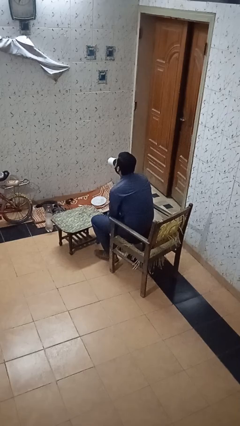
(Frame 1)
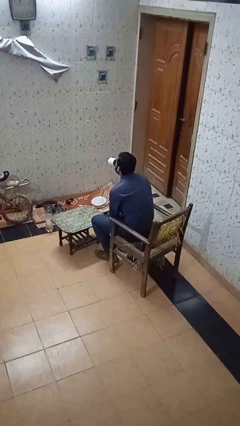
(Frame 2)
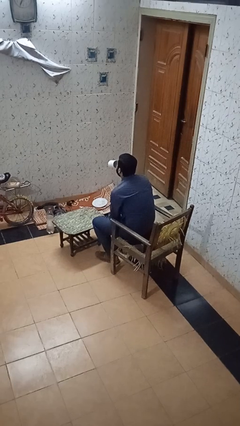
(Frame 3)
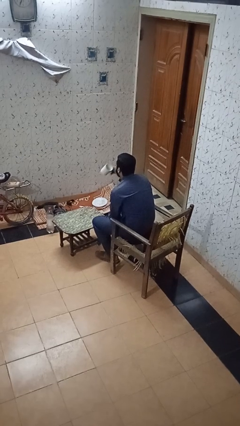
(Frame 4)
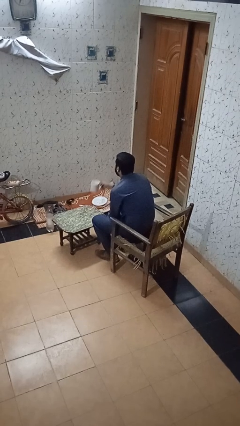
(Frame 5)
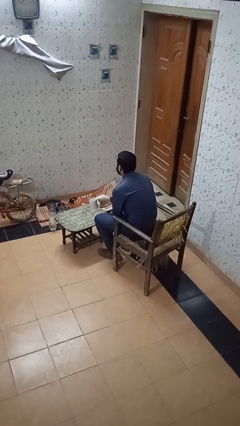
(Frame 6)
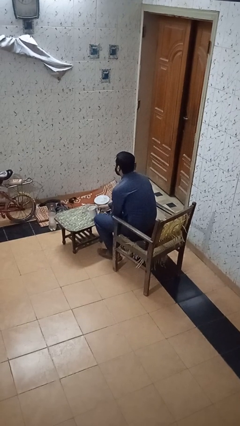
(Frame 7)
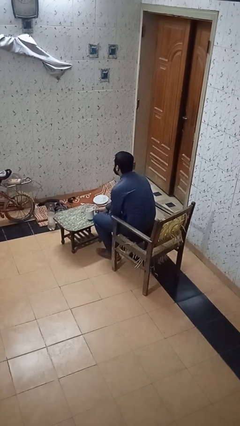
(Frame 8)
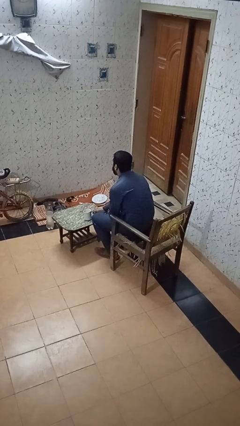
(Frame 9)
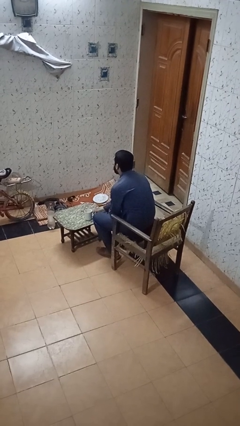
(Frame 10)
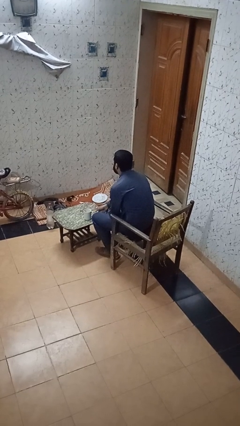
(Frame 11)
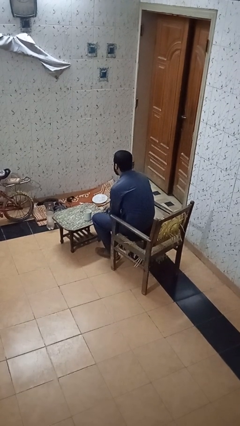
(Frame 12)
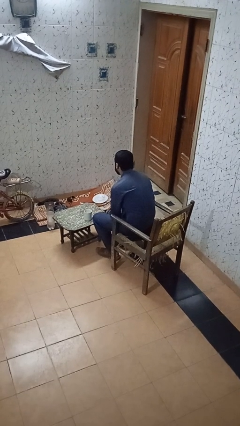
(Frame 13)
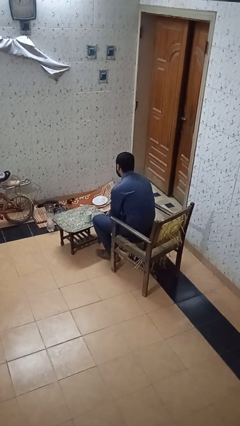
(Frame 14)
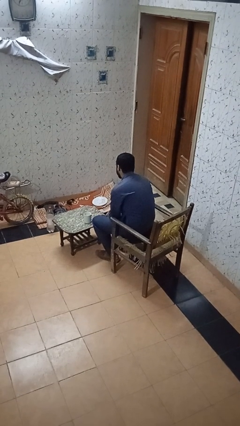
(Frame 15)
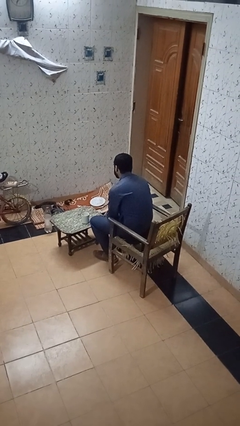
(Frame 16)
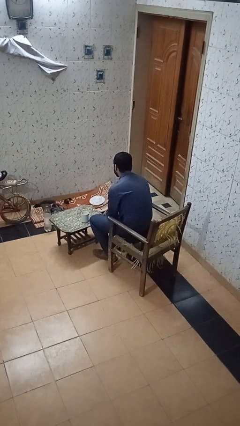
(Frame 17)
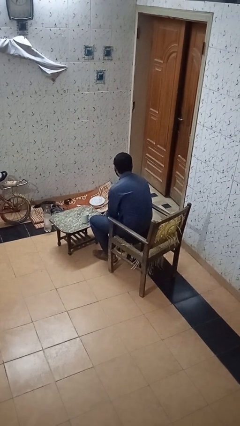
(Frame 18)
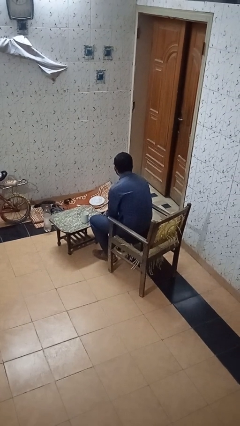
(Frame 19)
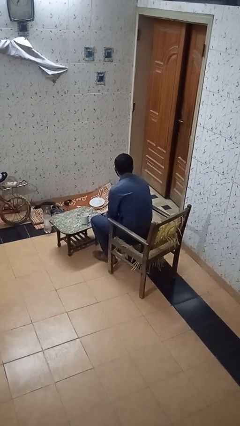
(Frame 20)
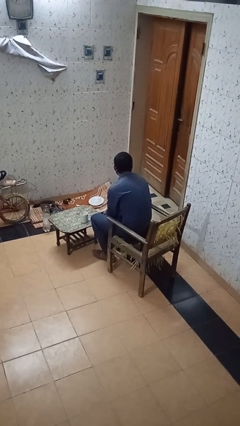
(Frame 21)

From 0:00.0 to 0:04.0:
person puts down object on table

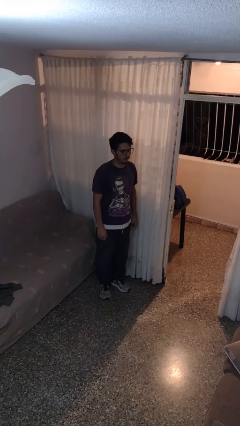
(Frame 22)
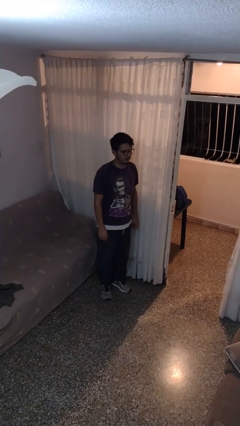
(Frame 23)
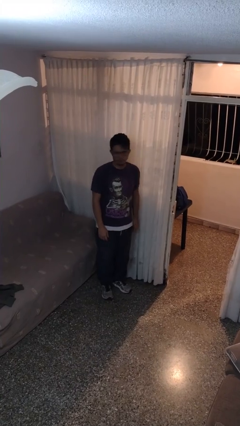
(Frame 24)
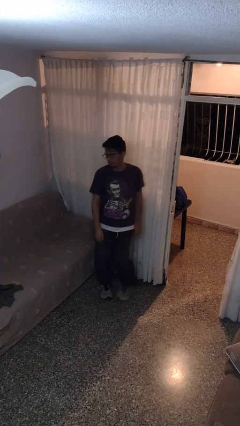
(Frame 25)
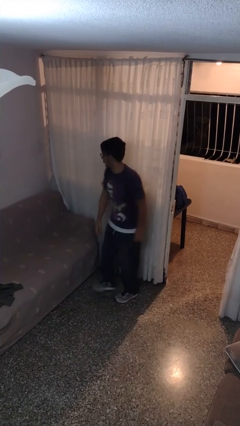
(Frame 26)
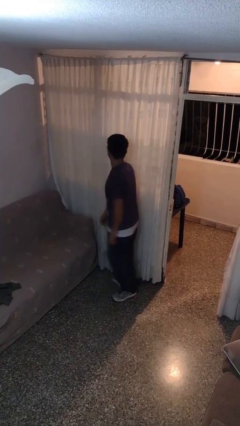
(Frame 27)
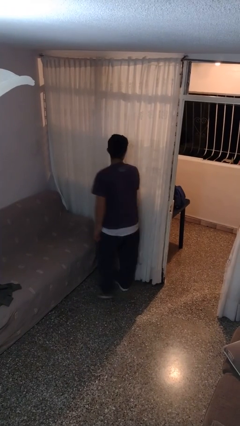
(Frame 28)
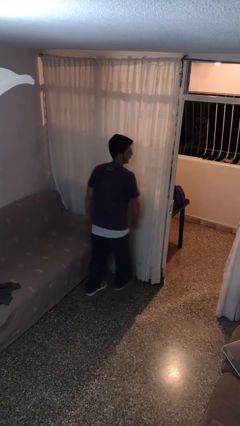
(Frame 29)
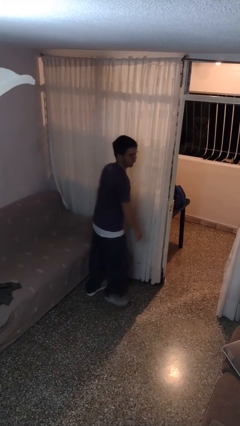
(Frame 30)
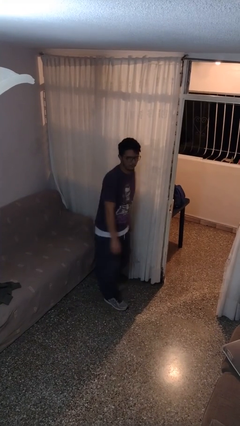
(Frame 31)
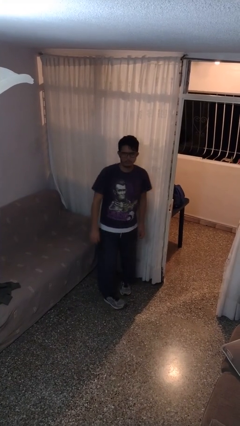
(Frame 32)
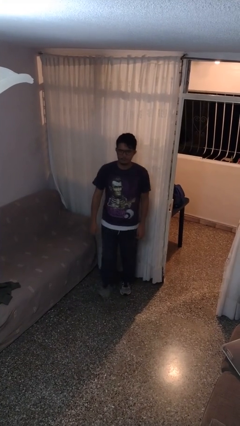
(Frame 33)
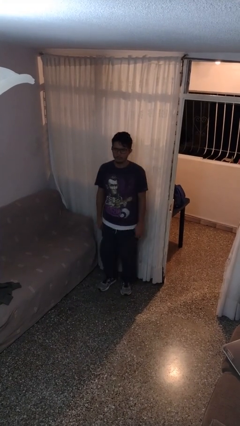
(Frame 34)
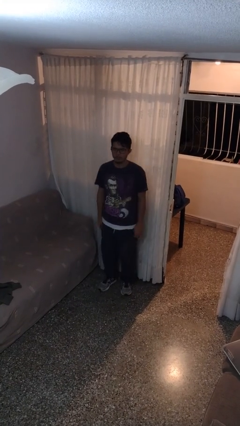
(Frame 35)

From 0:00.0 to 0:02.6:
person twirls

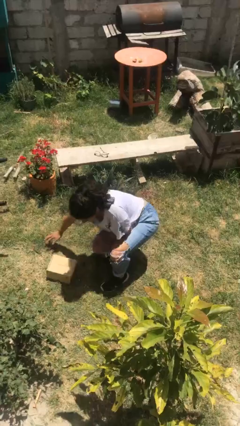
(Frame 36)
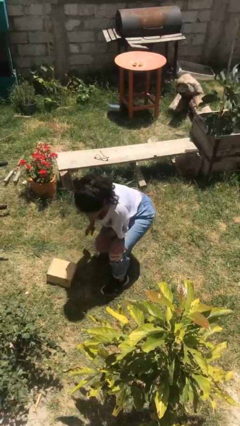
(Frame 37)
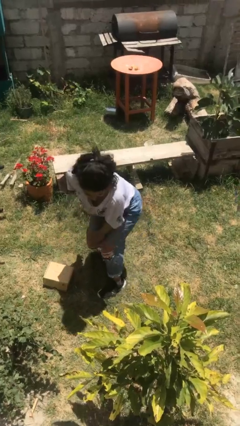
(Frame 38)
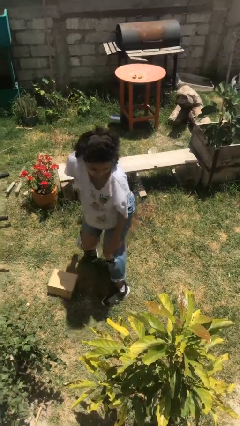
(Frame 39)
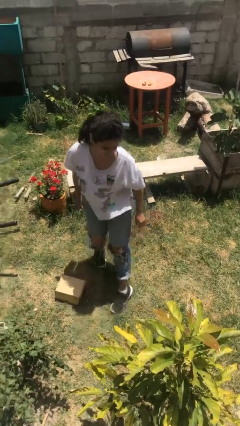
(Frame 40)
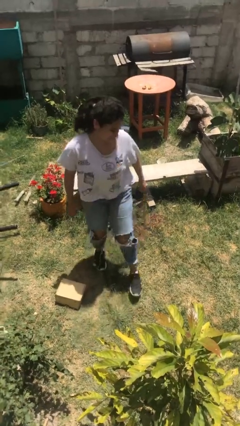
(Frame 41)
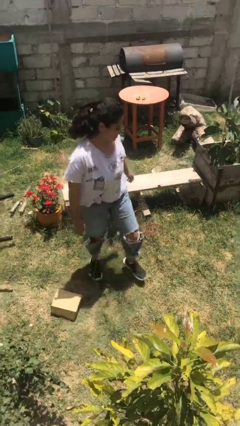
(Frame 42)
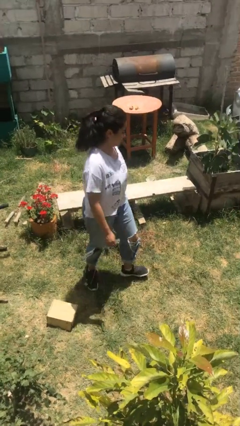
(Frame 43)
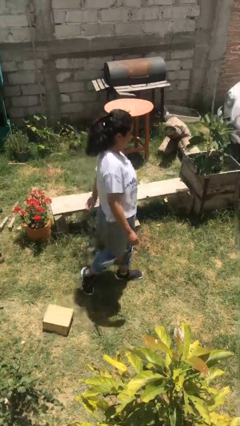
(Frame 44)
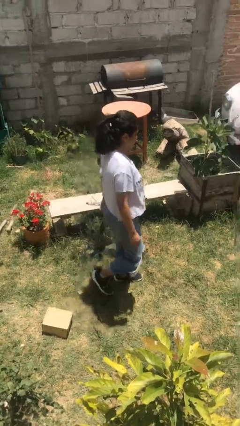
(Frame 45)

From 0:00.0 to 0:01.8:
person stands up from floor

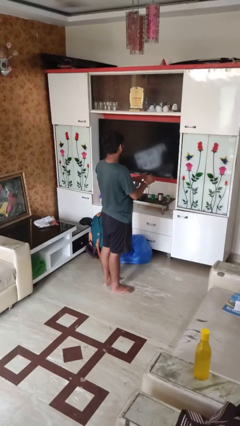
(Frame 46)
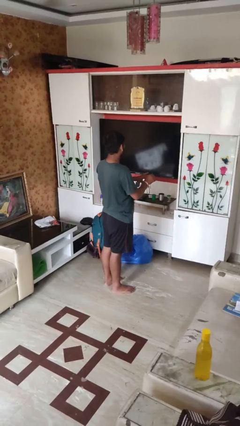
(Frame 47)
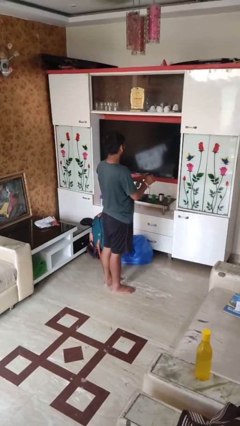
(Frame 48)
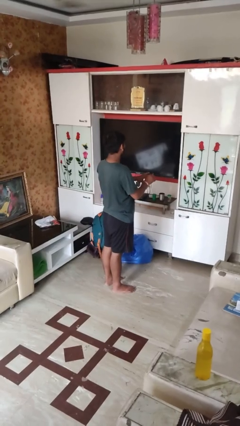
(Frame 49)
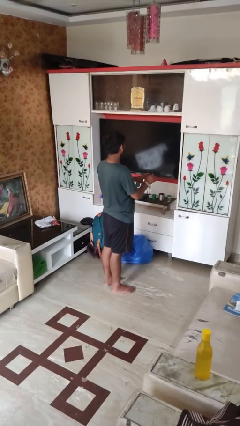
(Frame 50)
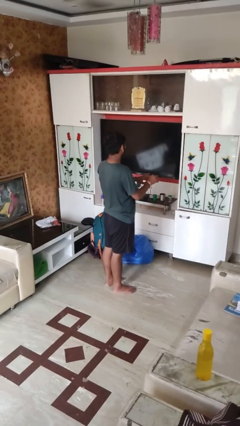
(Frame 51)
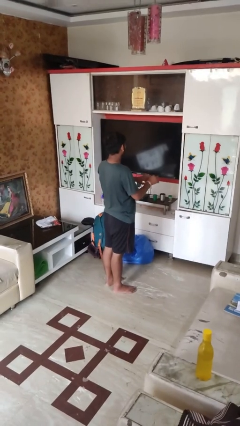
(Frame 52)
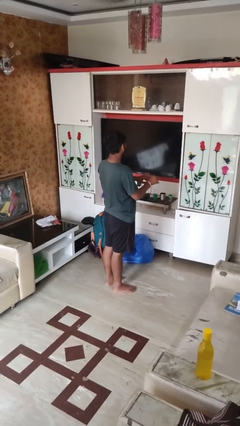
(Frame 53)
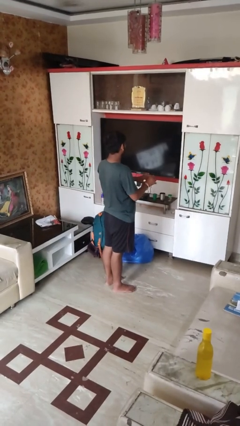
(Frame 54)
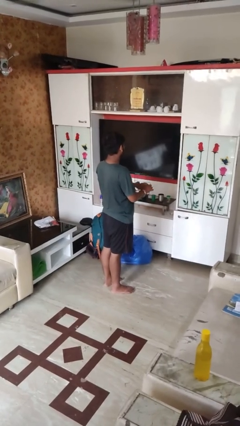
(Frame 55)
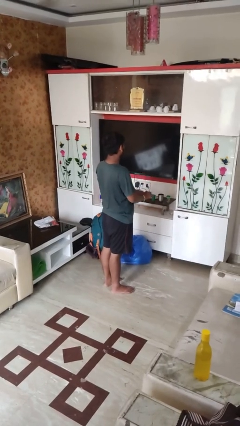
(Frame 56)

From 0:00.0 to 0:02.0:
person files fingernails

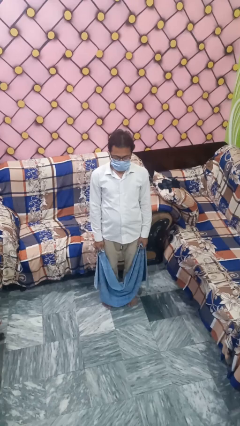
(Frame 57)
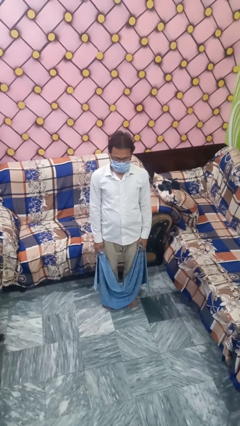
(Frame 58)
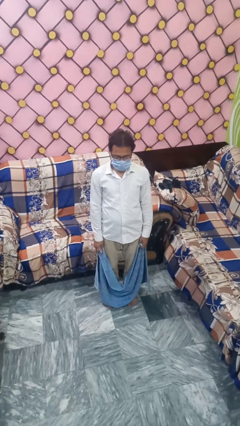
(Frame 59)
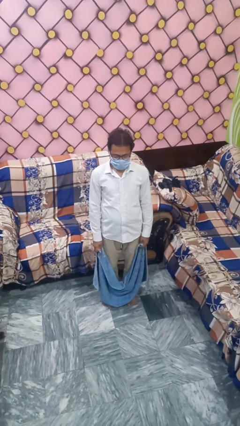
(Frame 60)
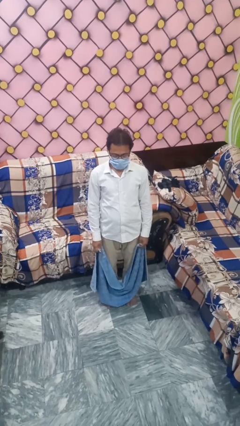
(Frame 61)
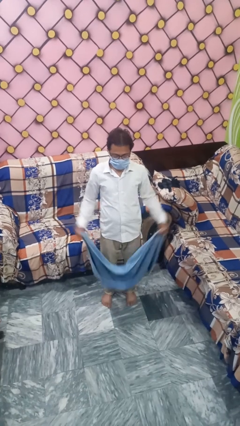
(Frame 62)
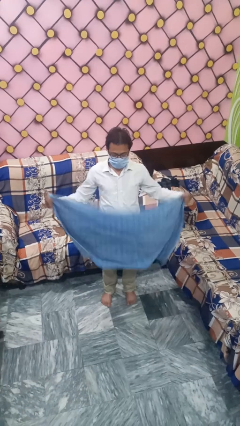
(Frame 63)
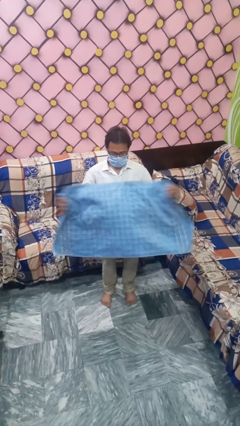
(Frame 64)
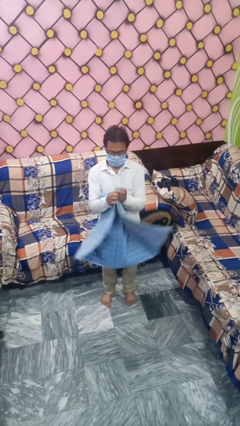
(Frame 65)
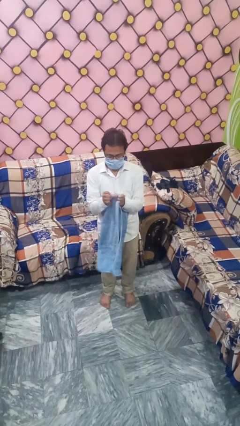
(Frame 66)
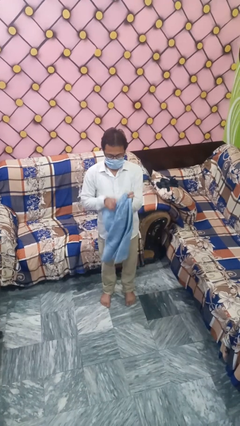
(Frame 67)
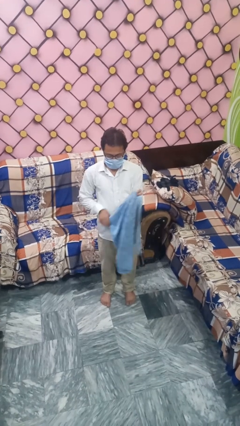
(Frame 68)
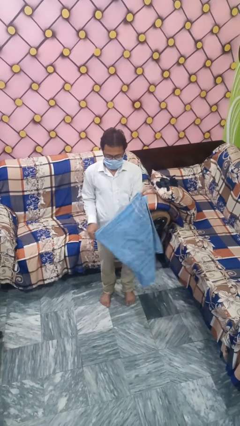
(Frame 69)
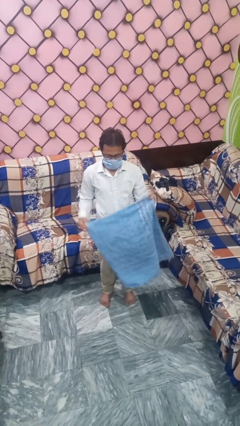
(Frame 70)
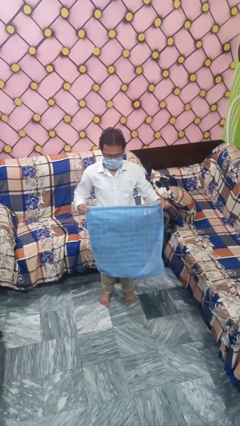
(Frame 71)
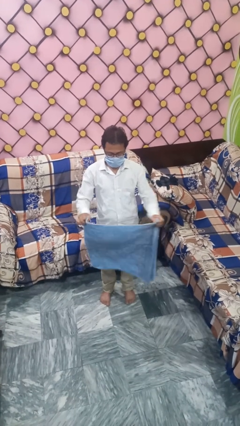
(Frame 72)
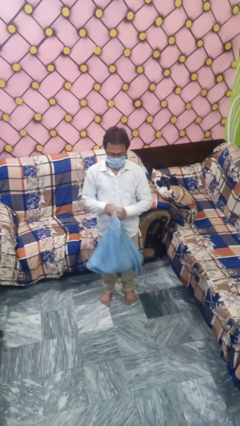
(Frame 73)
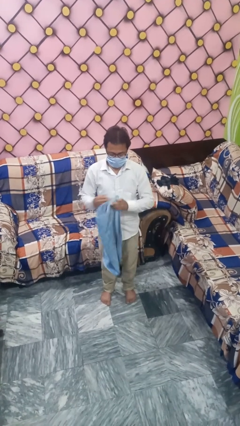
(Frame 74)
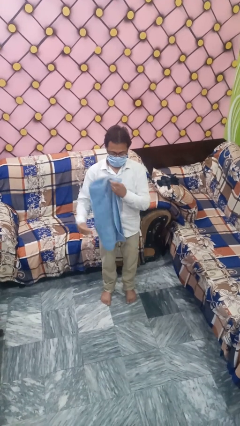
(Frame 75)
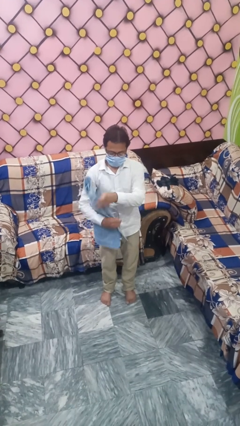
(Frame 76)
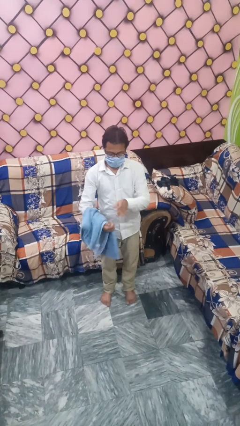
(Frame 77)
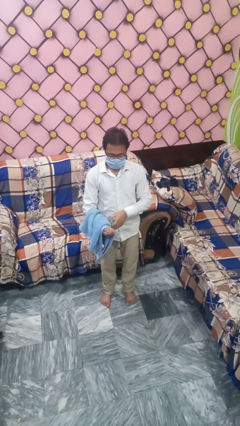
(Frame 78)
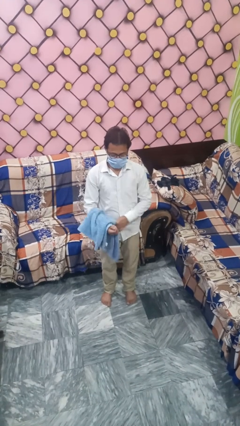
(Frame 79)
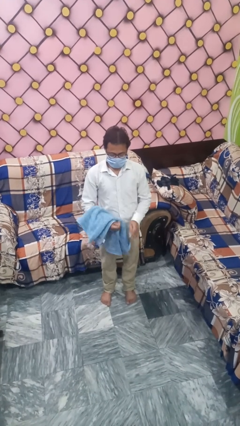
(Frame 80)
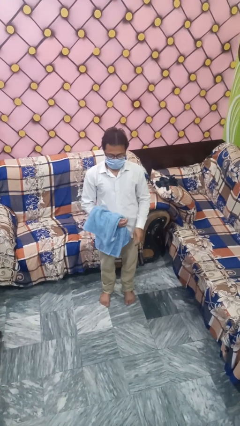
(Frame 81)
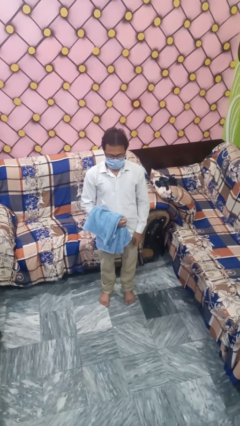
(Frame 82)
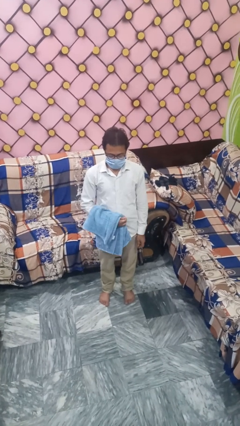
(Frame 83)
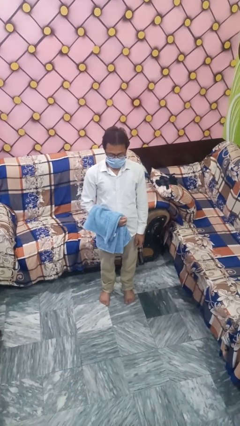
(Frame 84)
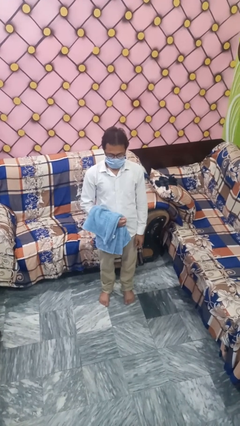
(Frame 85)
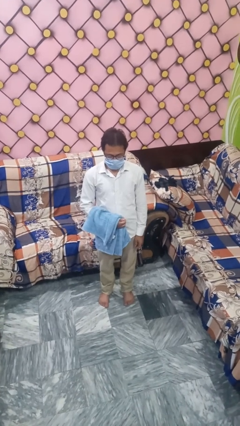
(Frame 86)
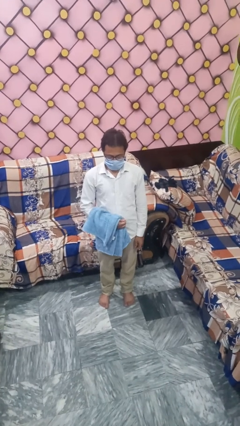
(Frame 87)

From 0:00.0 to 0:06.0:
person folds towel

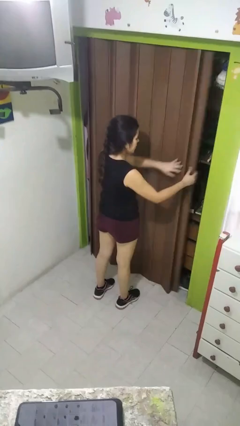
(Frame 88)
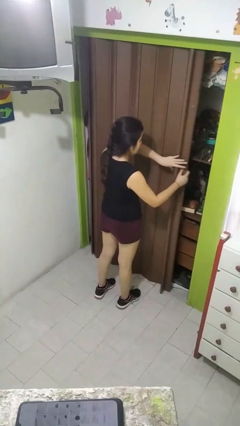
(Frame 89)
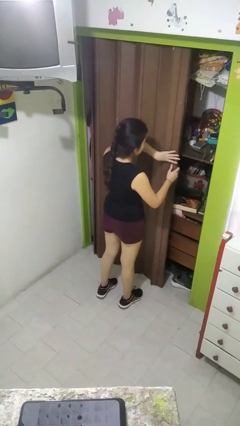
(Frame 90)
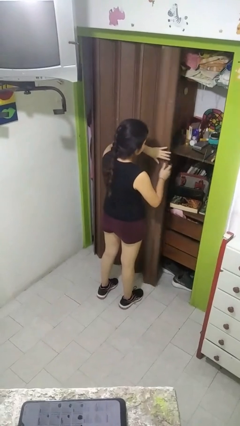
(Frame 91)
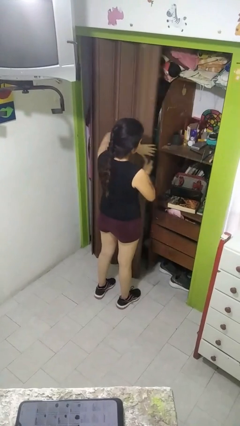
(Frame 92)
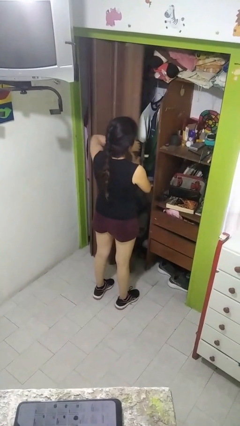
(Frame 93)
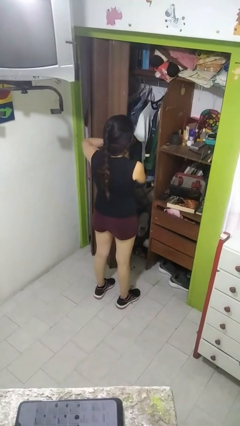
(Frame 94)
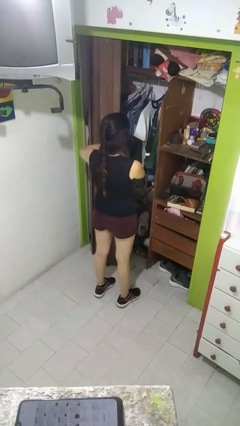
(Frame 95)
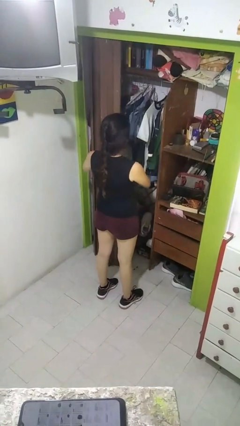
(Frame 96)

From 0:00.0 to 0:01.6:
person opens closet door
